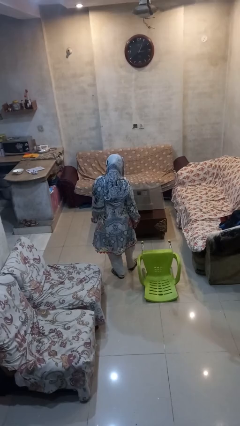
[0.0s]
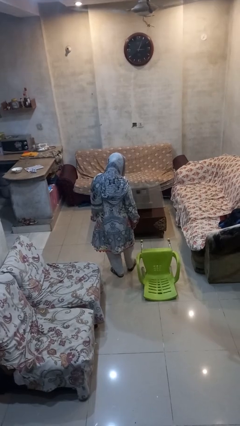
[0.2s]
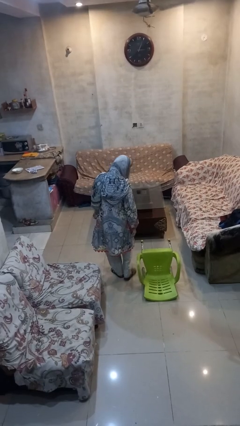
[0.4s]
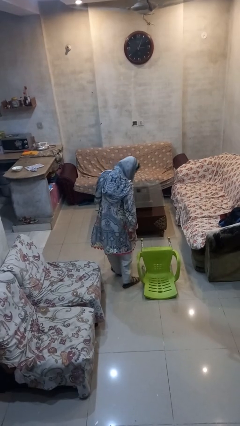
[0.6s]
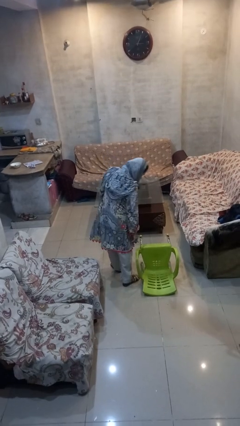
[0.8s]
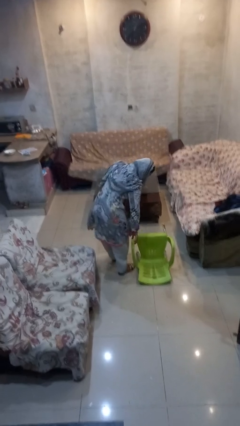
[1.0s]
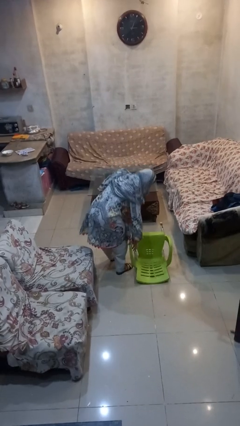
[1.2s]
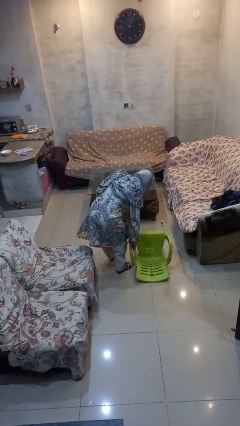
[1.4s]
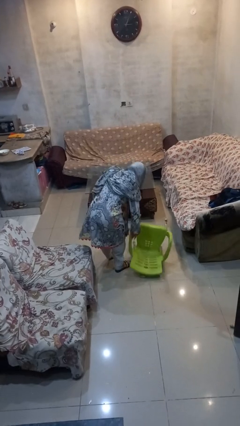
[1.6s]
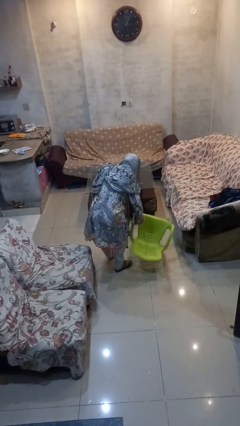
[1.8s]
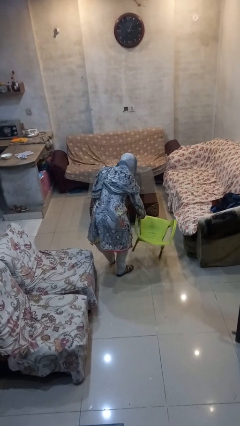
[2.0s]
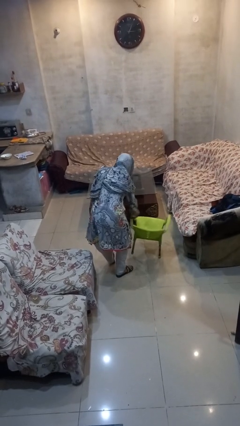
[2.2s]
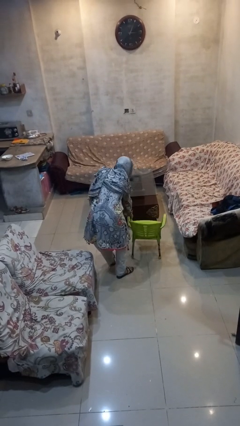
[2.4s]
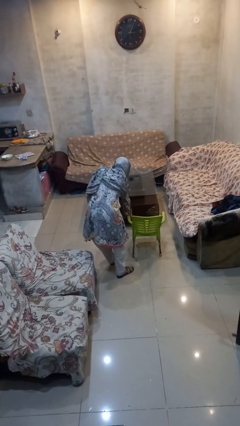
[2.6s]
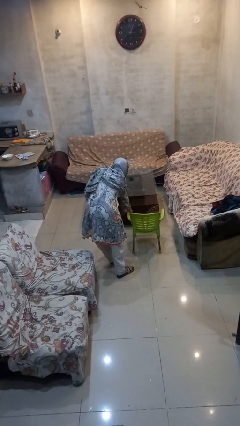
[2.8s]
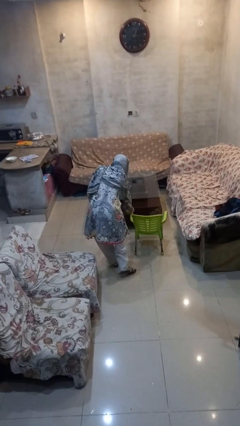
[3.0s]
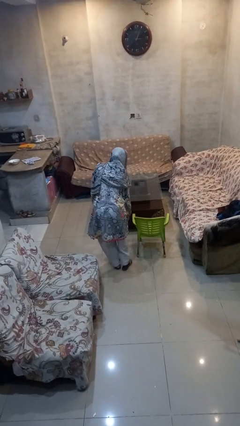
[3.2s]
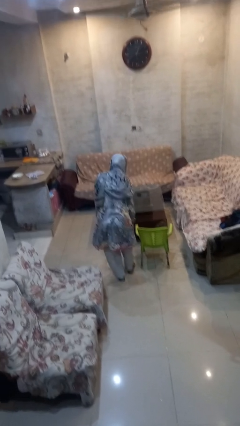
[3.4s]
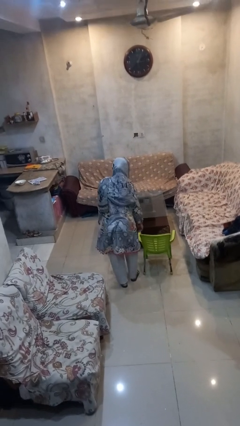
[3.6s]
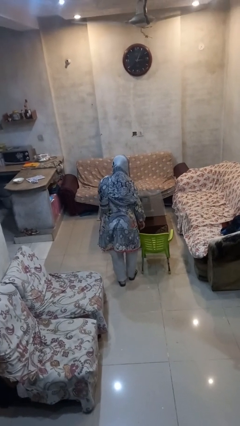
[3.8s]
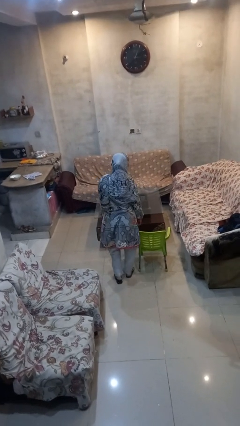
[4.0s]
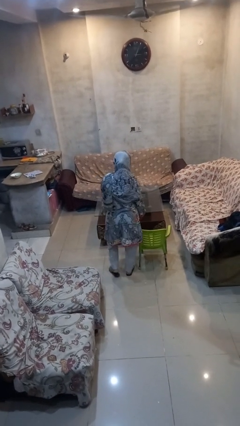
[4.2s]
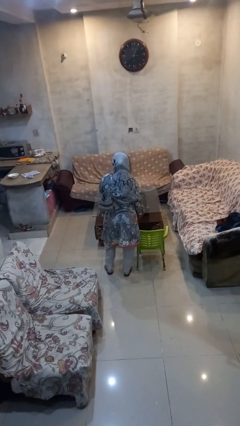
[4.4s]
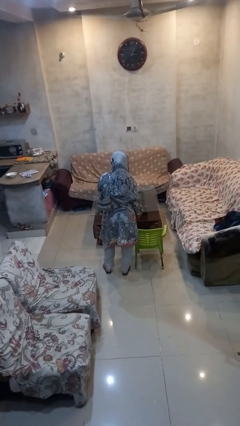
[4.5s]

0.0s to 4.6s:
person sets upright furniture

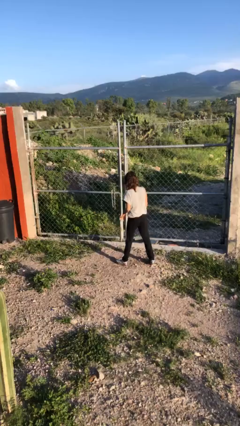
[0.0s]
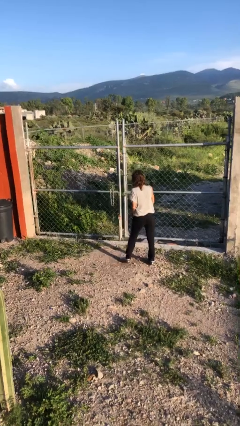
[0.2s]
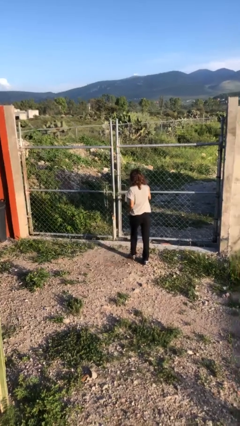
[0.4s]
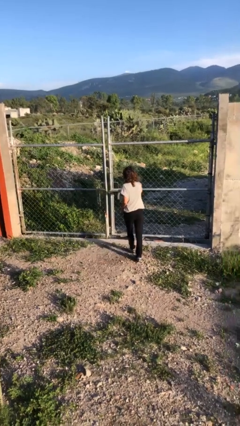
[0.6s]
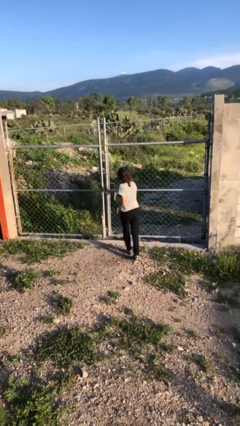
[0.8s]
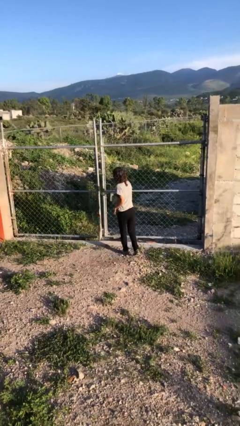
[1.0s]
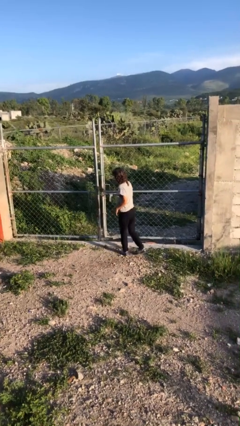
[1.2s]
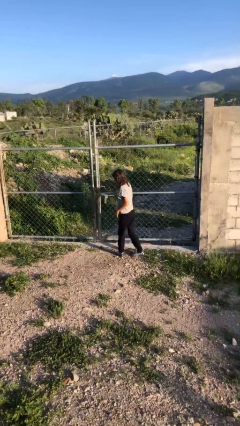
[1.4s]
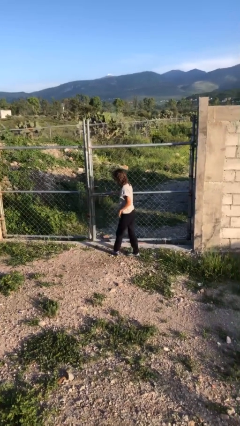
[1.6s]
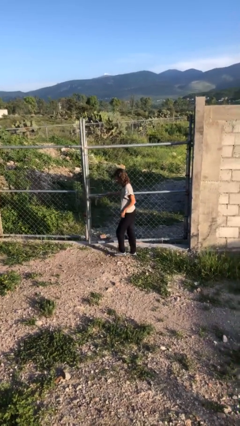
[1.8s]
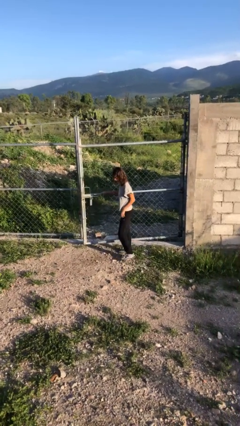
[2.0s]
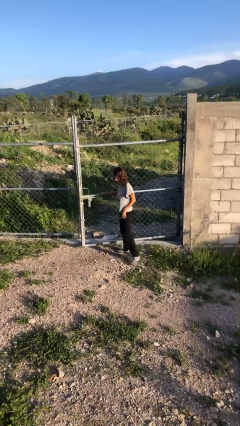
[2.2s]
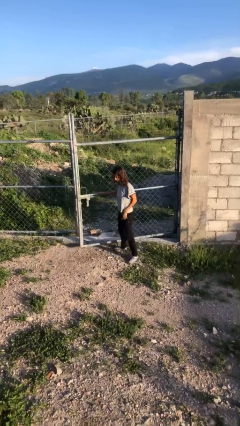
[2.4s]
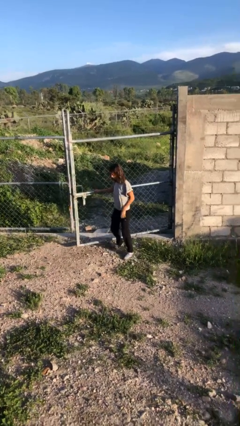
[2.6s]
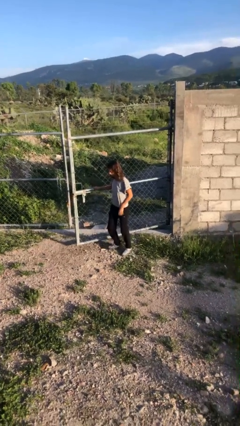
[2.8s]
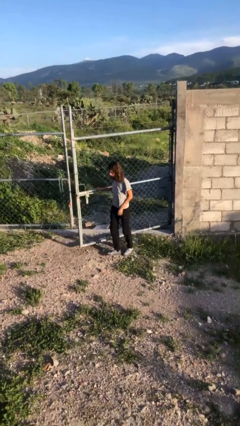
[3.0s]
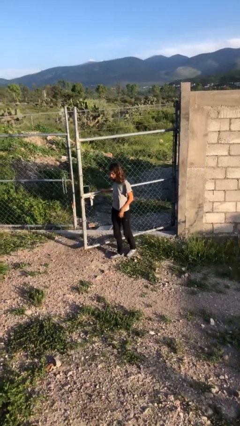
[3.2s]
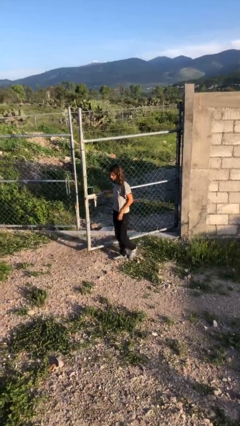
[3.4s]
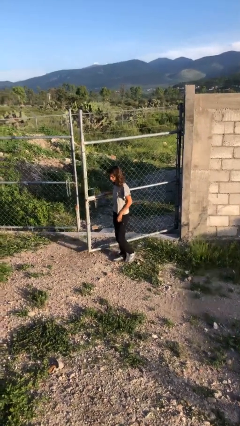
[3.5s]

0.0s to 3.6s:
person opens gate

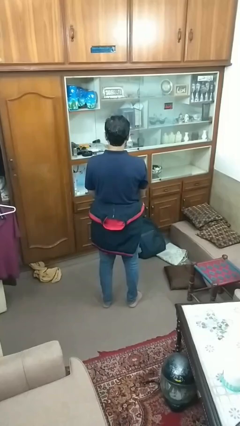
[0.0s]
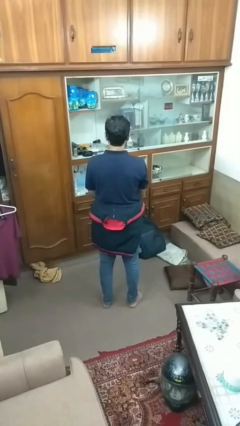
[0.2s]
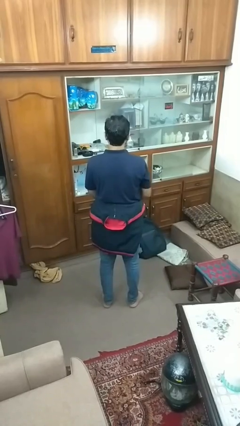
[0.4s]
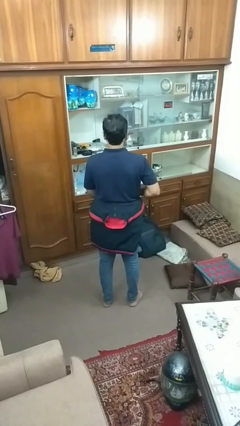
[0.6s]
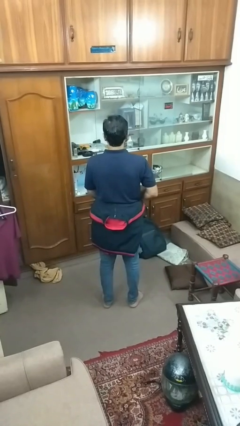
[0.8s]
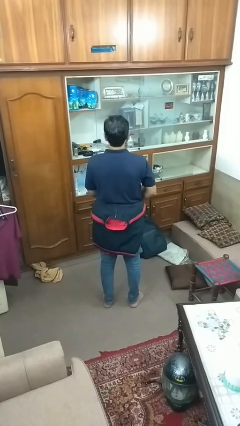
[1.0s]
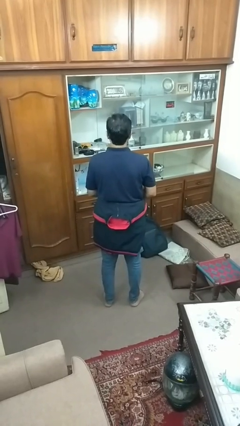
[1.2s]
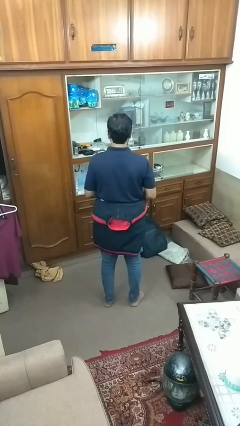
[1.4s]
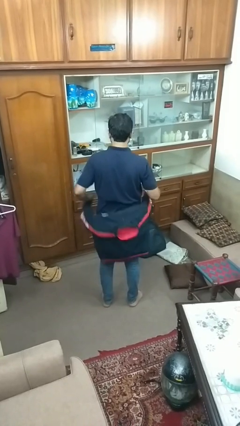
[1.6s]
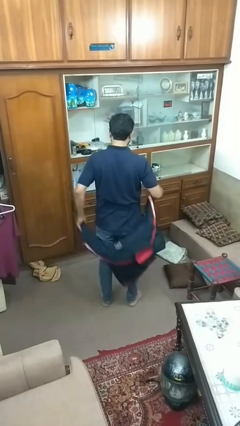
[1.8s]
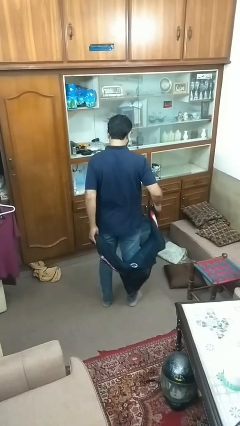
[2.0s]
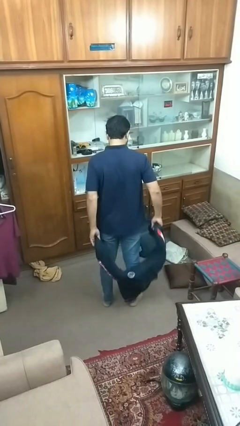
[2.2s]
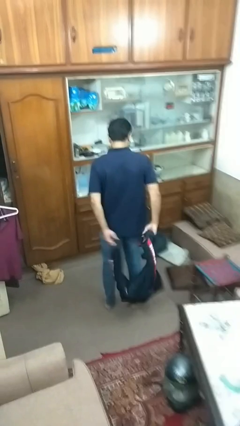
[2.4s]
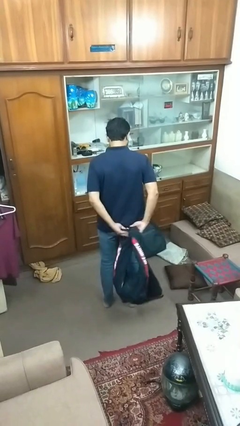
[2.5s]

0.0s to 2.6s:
person unties jacket around waist

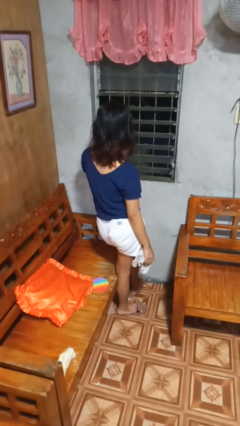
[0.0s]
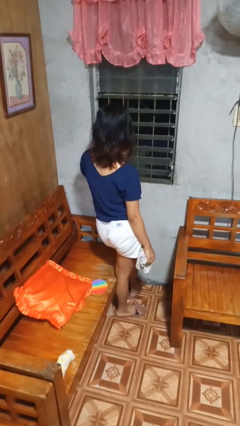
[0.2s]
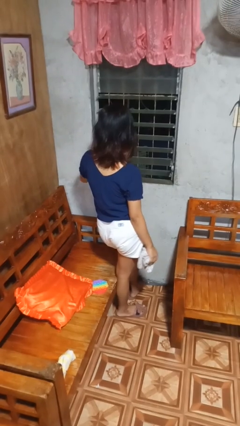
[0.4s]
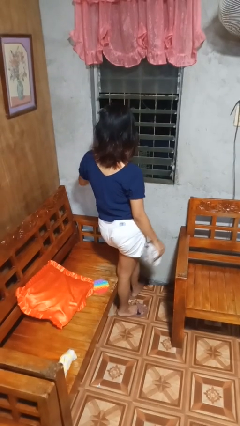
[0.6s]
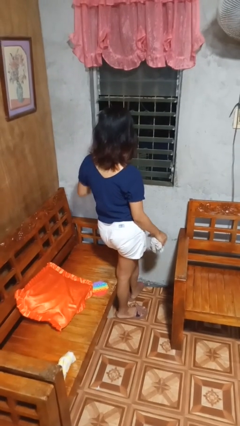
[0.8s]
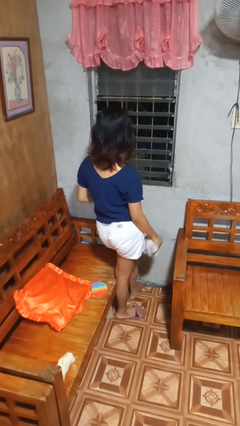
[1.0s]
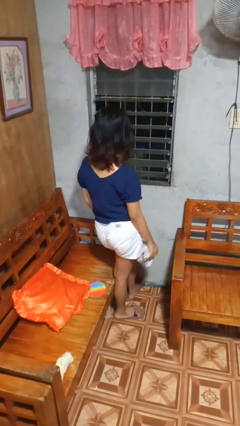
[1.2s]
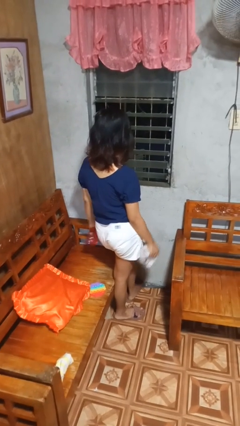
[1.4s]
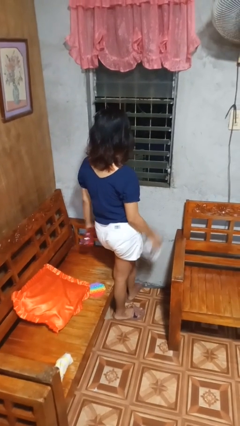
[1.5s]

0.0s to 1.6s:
person sprays from bottle

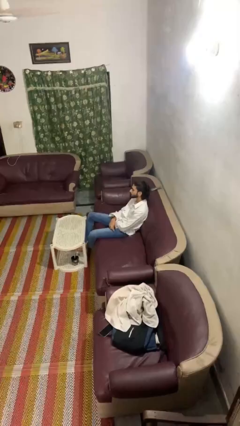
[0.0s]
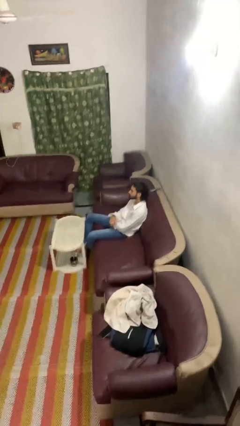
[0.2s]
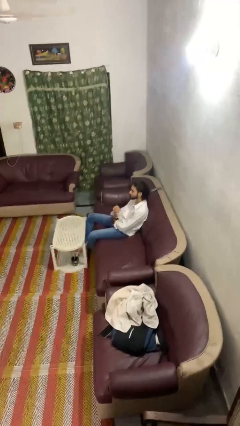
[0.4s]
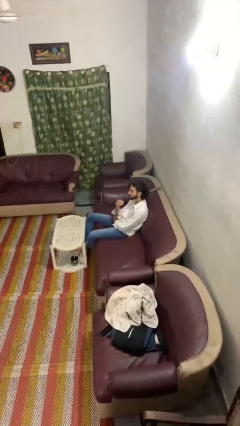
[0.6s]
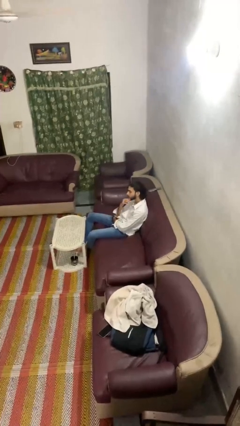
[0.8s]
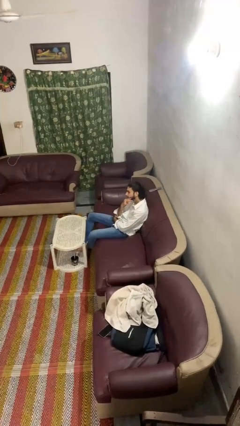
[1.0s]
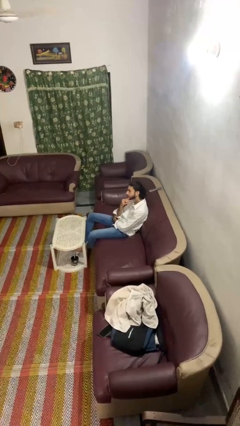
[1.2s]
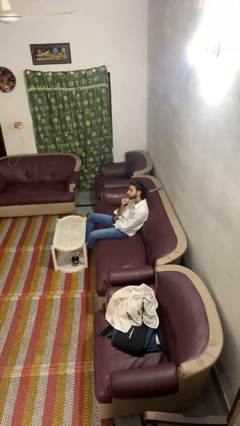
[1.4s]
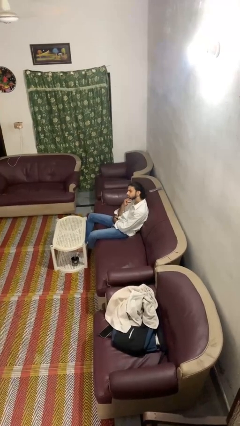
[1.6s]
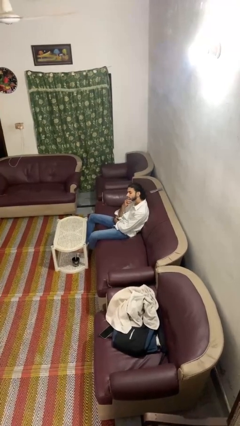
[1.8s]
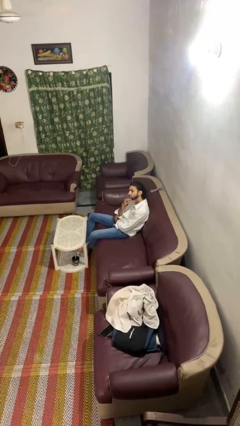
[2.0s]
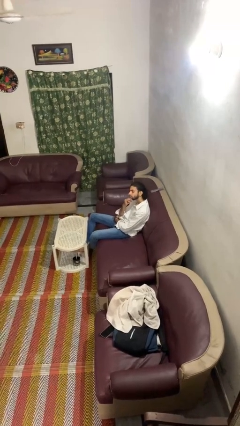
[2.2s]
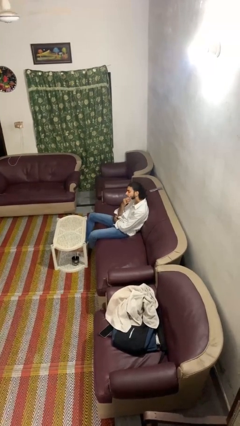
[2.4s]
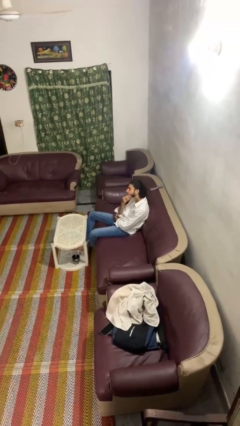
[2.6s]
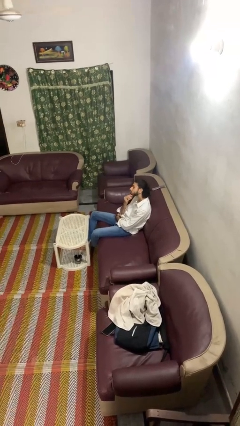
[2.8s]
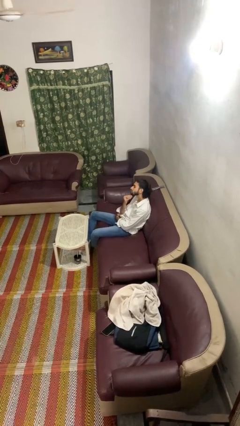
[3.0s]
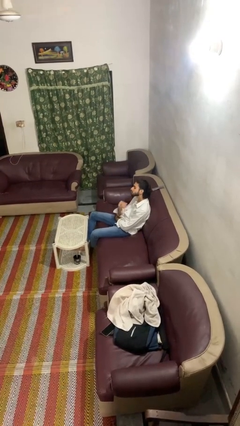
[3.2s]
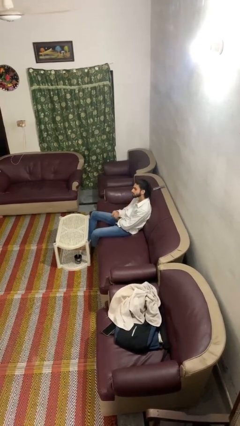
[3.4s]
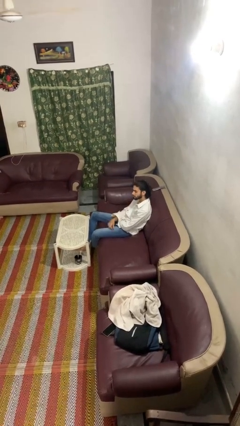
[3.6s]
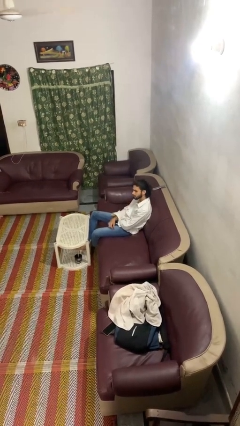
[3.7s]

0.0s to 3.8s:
person strokes chin

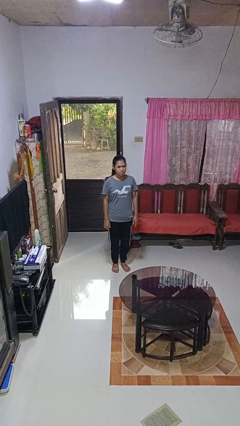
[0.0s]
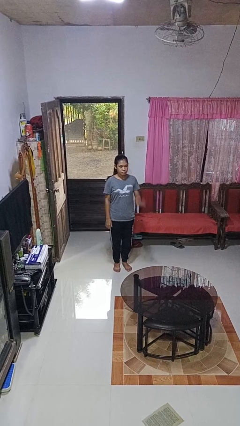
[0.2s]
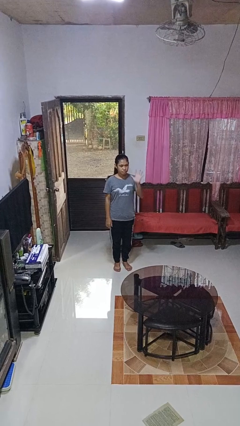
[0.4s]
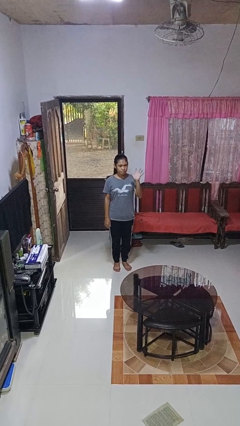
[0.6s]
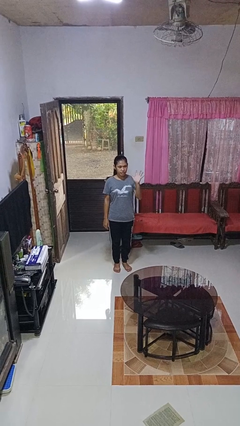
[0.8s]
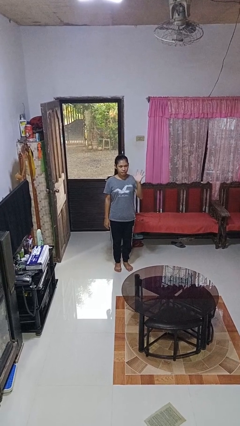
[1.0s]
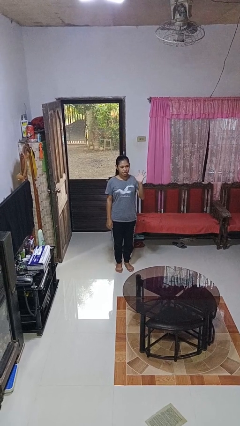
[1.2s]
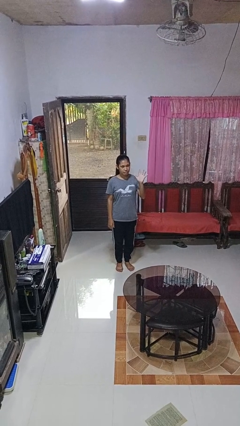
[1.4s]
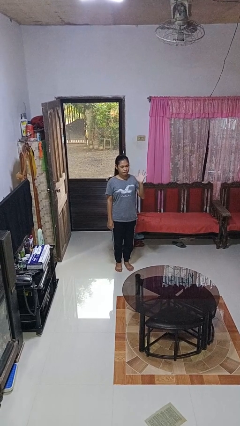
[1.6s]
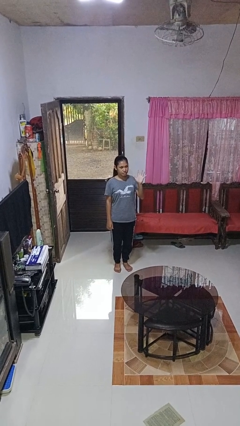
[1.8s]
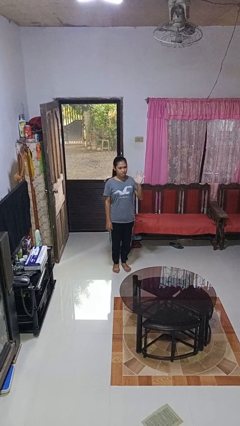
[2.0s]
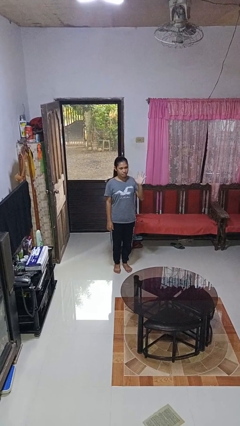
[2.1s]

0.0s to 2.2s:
person gestures number five
